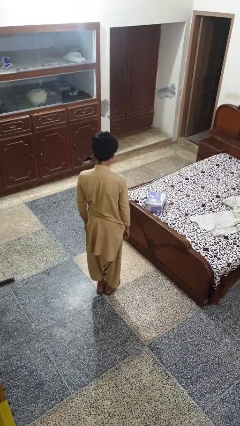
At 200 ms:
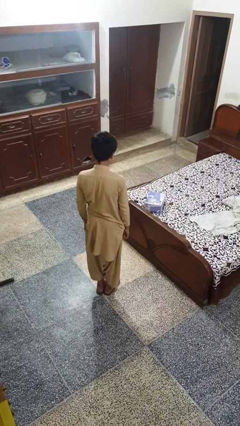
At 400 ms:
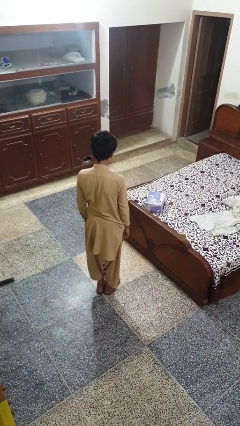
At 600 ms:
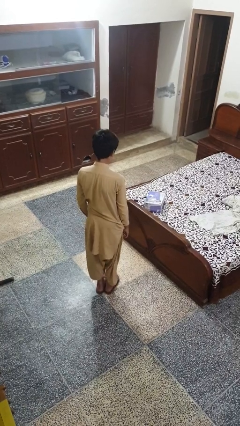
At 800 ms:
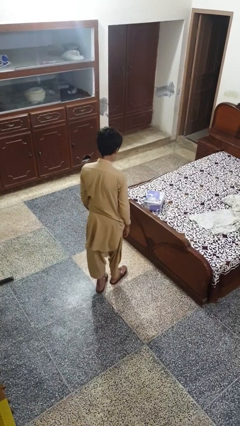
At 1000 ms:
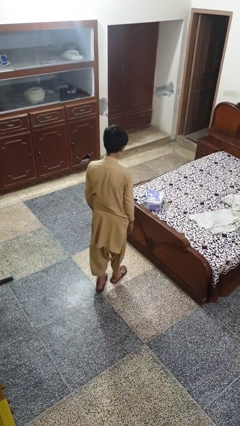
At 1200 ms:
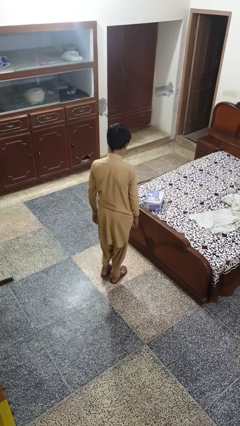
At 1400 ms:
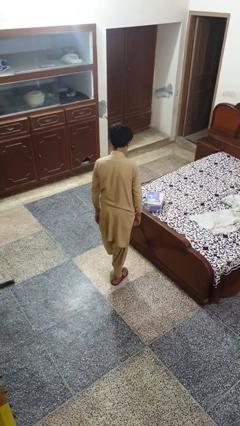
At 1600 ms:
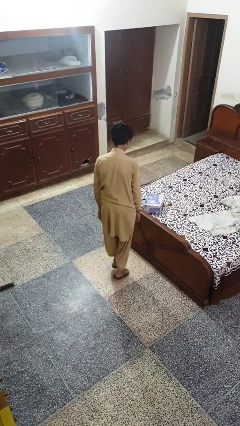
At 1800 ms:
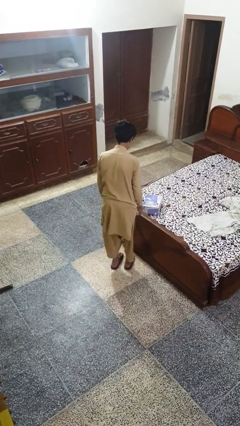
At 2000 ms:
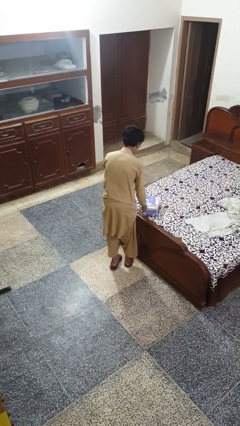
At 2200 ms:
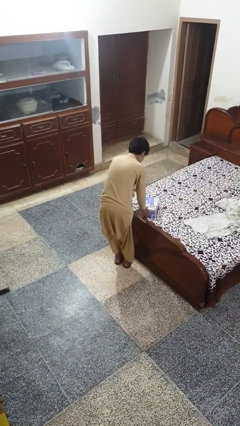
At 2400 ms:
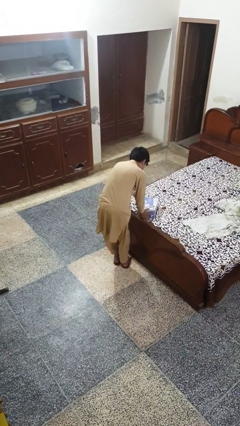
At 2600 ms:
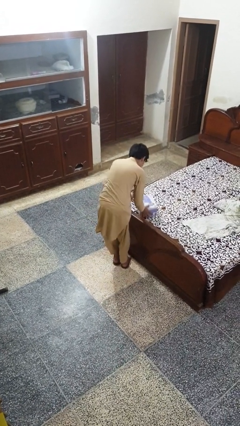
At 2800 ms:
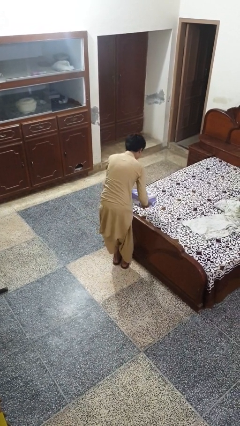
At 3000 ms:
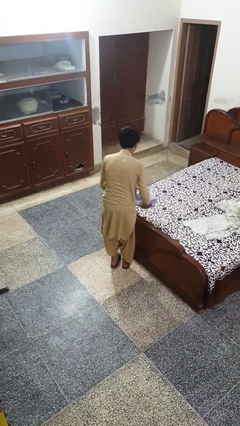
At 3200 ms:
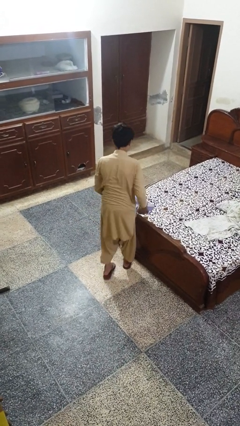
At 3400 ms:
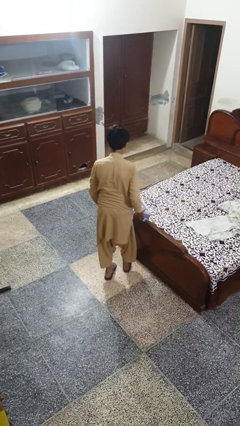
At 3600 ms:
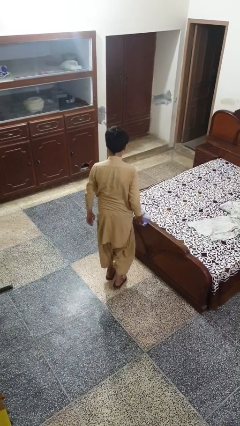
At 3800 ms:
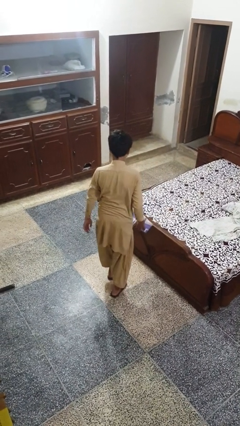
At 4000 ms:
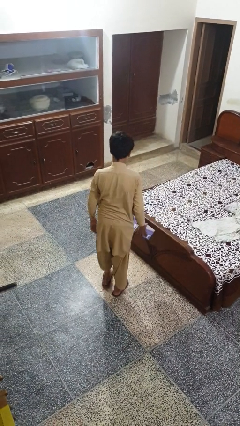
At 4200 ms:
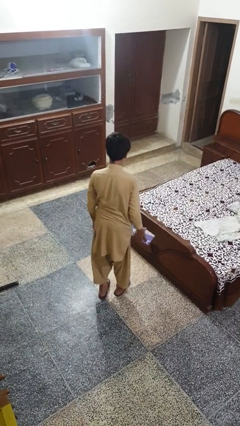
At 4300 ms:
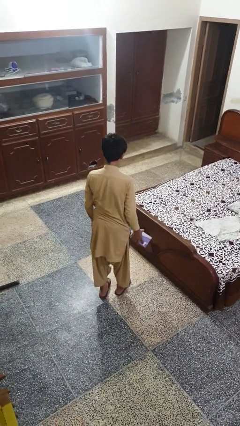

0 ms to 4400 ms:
person picks up object from bed

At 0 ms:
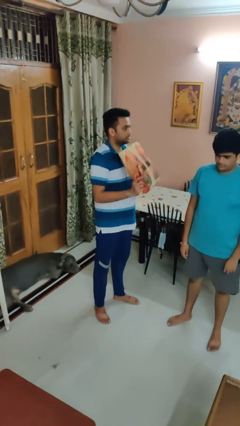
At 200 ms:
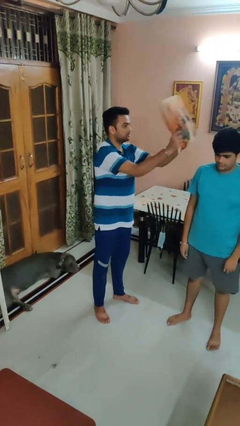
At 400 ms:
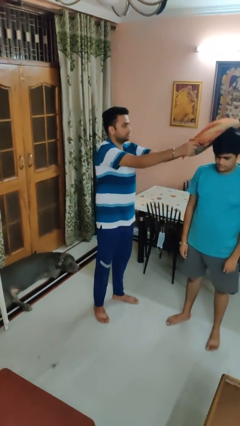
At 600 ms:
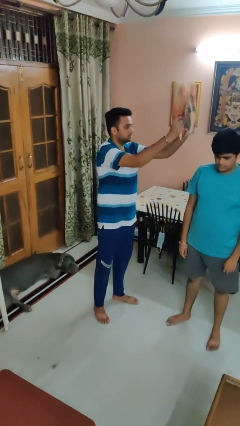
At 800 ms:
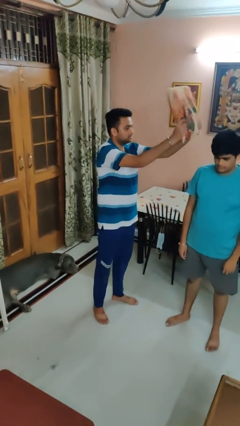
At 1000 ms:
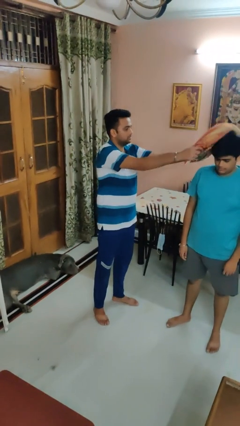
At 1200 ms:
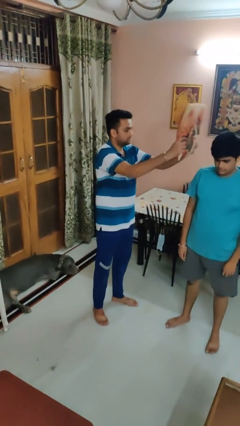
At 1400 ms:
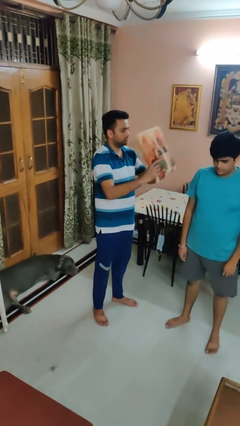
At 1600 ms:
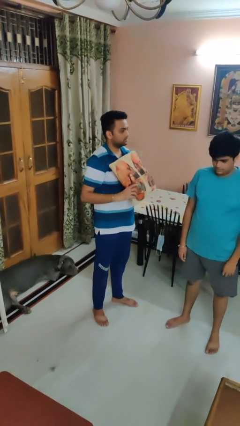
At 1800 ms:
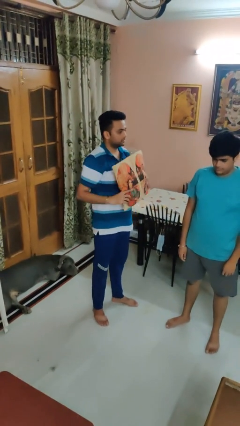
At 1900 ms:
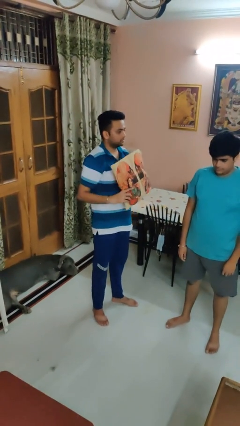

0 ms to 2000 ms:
person hits person with pillow

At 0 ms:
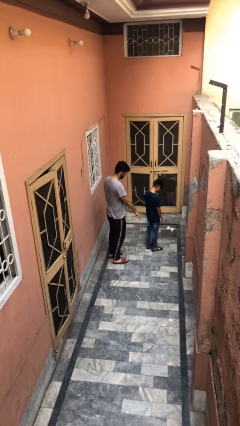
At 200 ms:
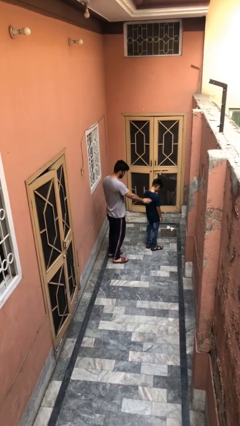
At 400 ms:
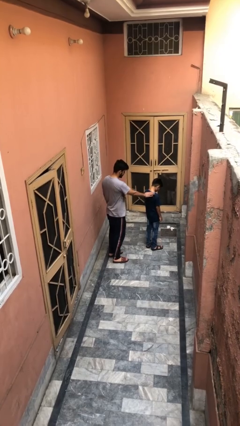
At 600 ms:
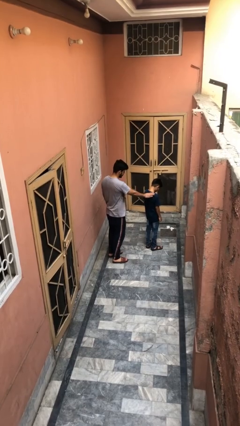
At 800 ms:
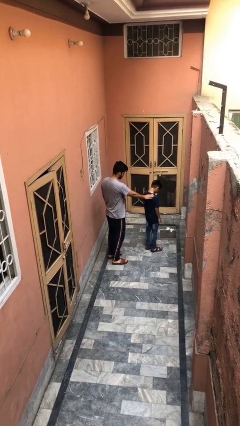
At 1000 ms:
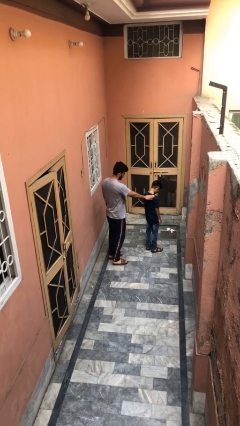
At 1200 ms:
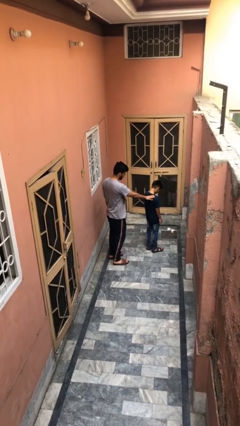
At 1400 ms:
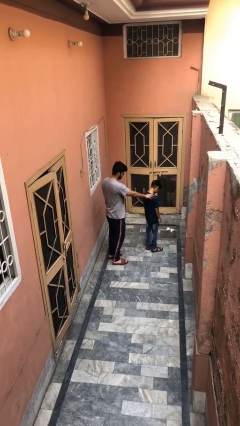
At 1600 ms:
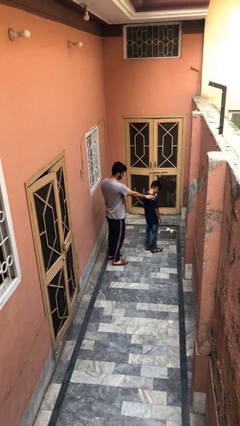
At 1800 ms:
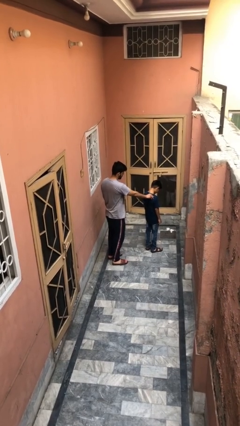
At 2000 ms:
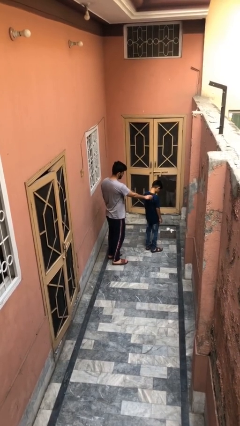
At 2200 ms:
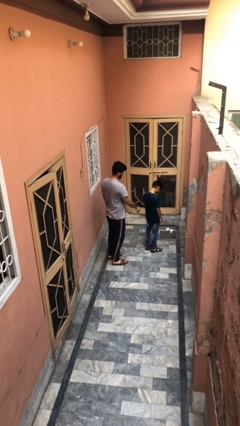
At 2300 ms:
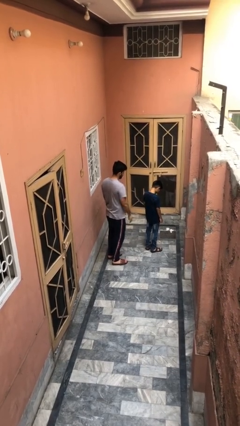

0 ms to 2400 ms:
person touches back of person

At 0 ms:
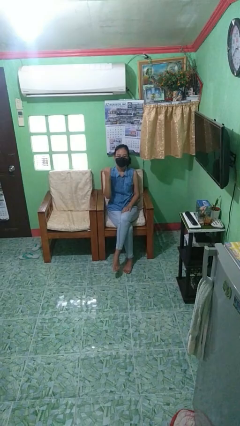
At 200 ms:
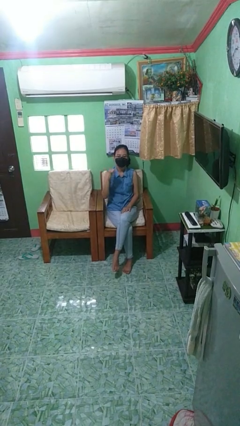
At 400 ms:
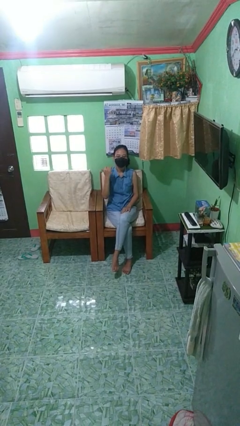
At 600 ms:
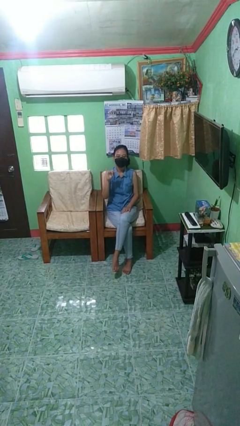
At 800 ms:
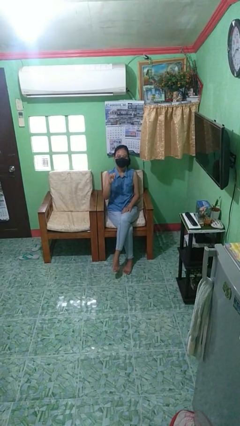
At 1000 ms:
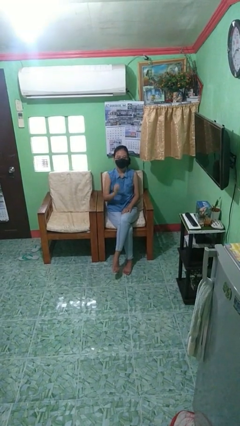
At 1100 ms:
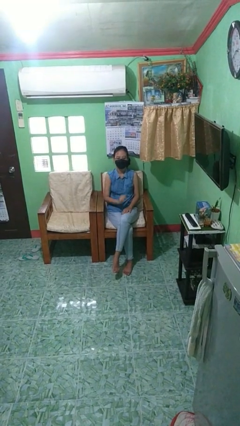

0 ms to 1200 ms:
person gestures hang loose

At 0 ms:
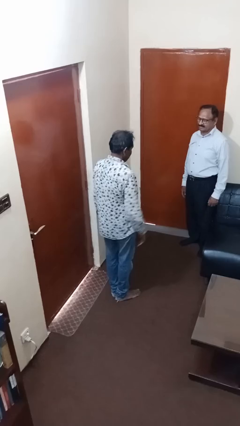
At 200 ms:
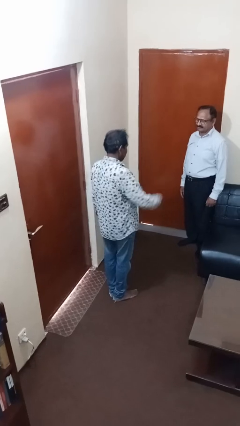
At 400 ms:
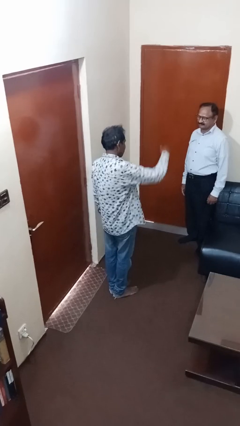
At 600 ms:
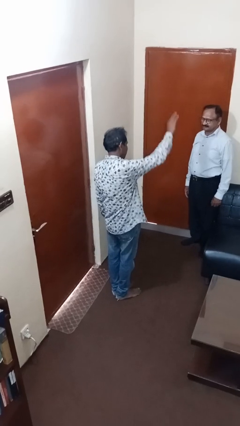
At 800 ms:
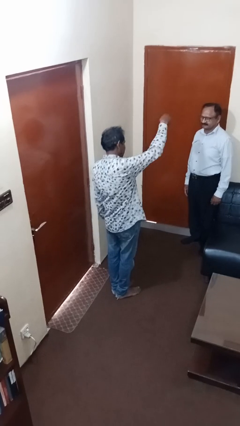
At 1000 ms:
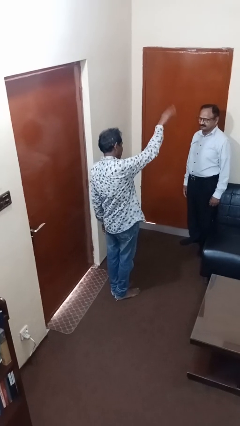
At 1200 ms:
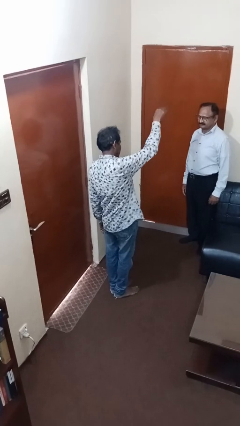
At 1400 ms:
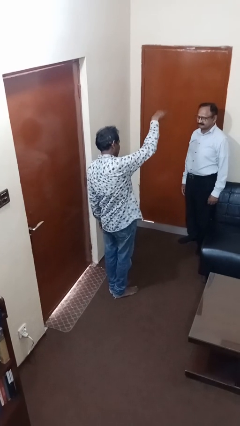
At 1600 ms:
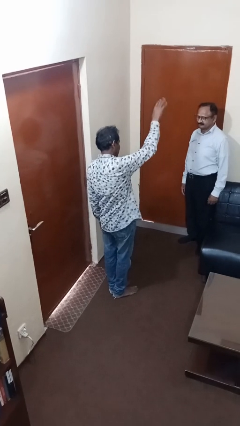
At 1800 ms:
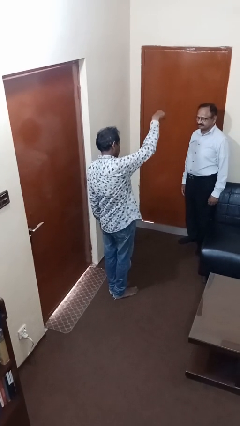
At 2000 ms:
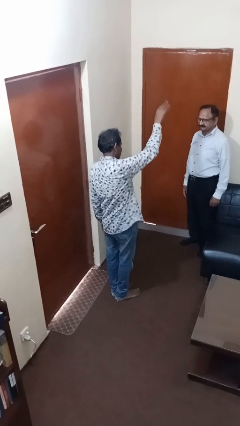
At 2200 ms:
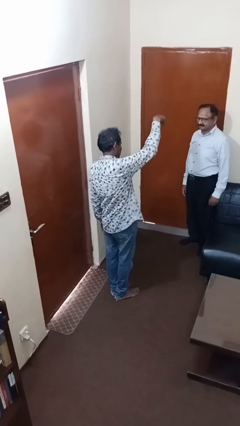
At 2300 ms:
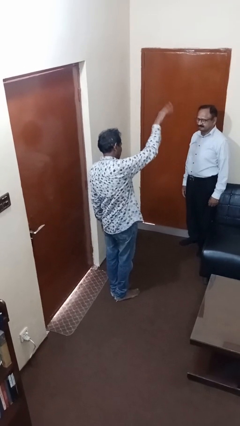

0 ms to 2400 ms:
person shoves person

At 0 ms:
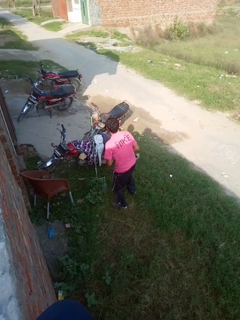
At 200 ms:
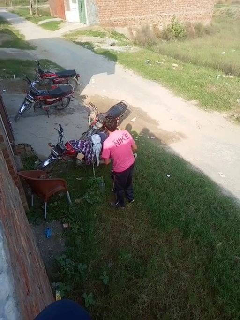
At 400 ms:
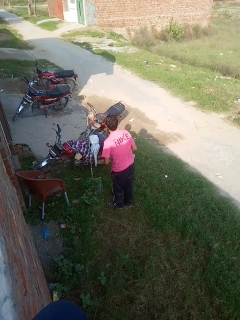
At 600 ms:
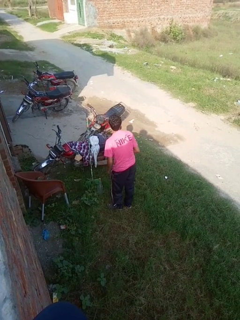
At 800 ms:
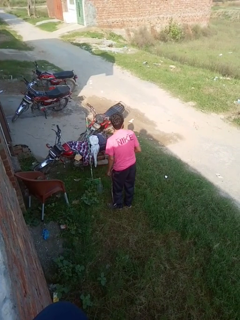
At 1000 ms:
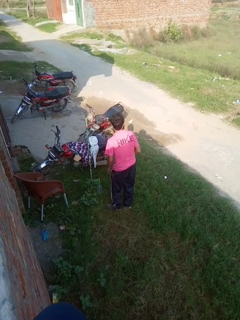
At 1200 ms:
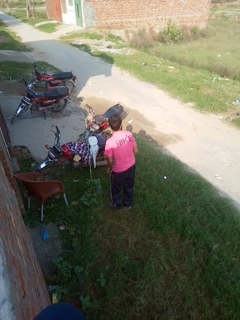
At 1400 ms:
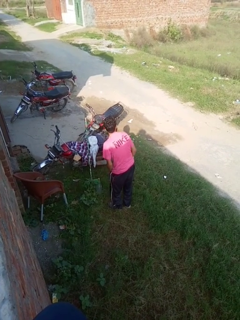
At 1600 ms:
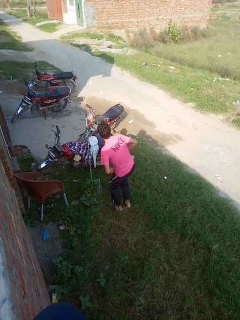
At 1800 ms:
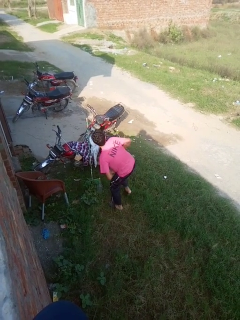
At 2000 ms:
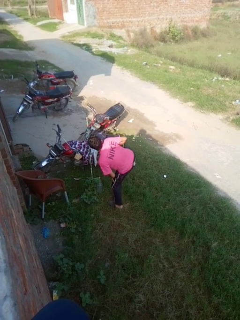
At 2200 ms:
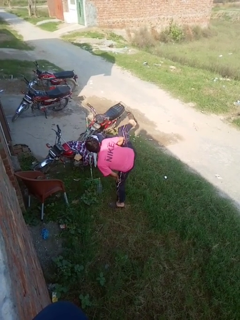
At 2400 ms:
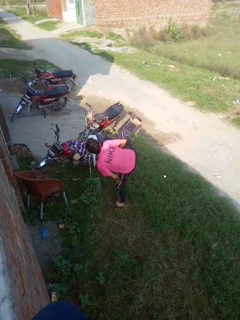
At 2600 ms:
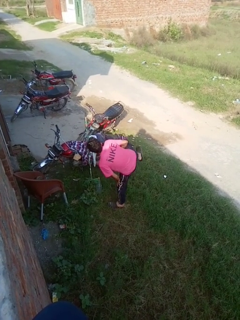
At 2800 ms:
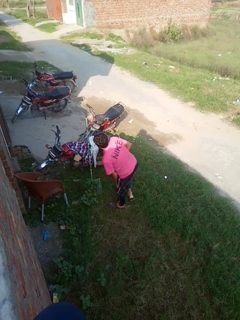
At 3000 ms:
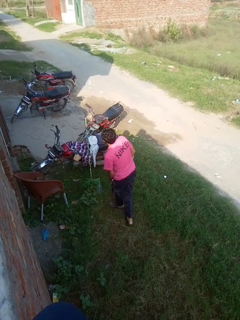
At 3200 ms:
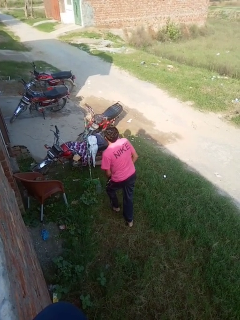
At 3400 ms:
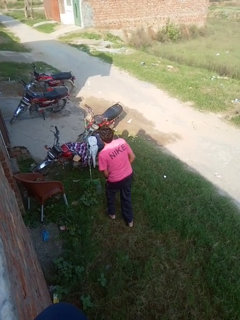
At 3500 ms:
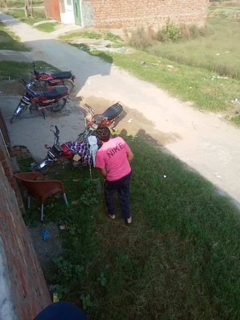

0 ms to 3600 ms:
person karate kicks

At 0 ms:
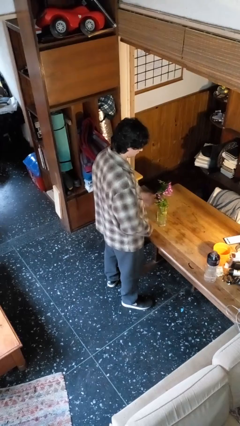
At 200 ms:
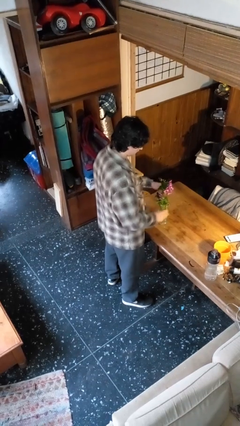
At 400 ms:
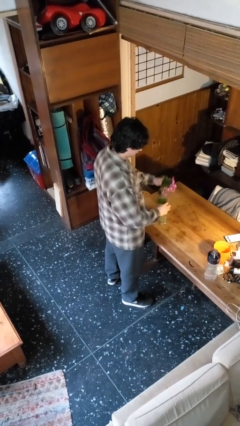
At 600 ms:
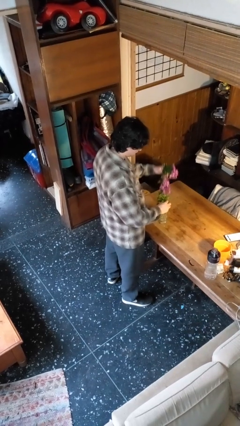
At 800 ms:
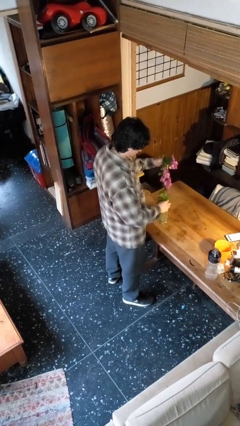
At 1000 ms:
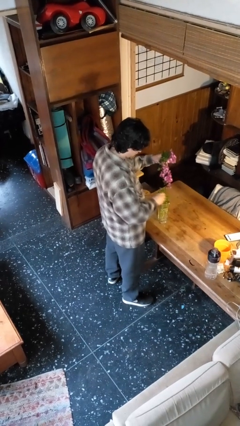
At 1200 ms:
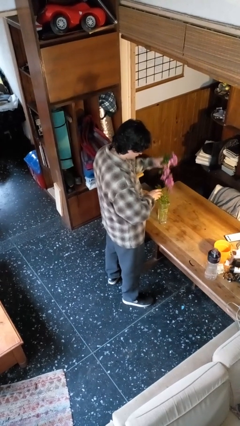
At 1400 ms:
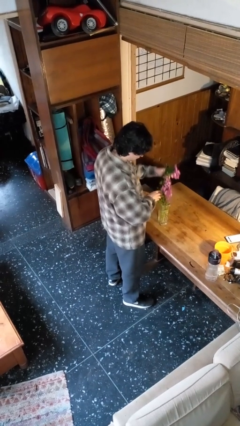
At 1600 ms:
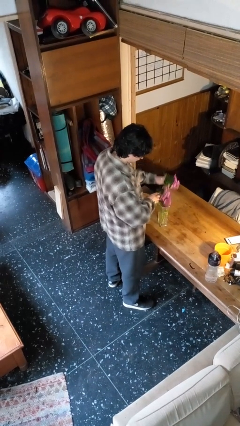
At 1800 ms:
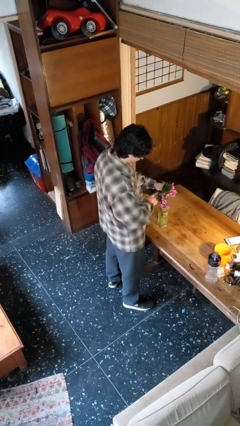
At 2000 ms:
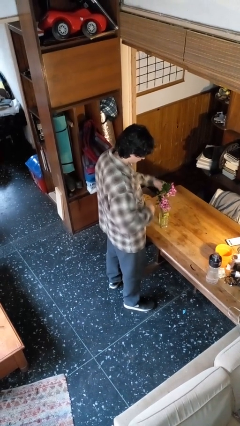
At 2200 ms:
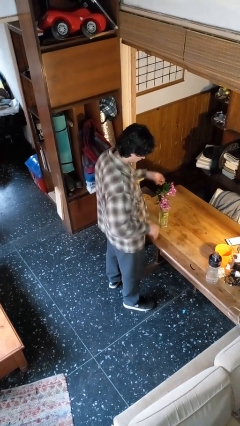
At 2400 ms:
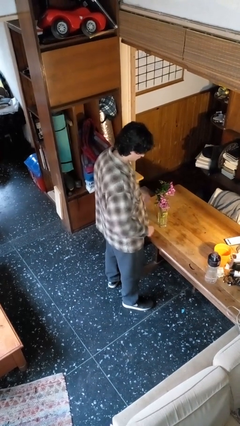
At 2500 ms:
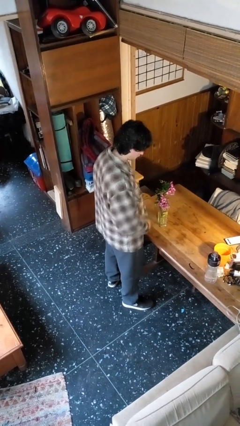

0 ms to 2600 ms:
person arranges flowers in vase
